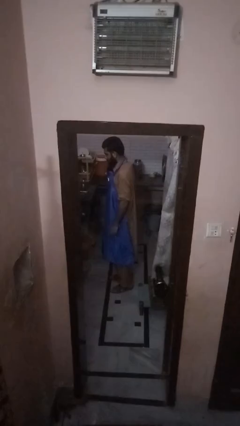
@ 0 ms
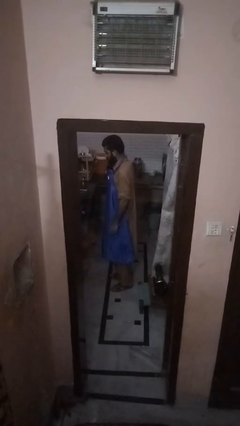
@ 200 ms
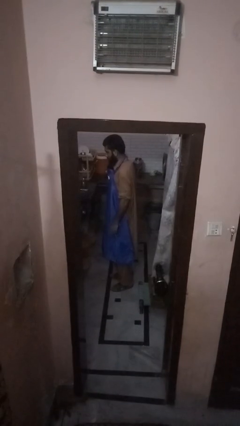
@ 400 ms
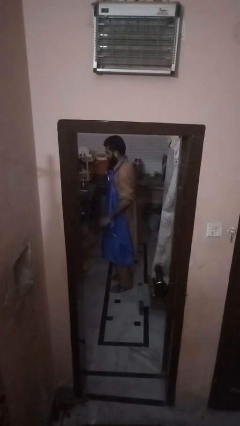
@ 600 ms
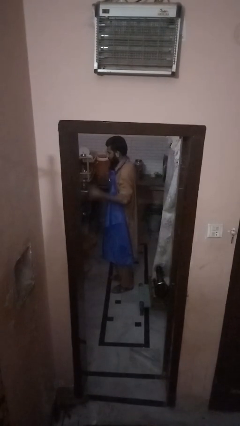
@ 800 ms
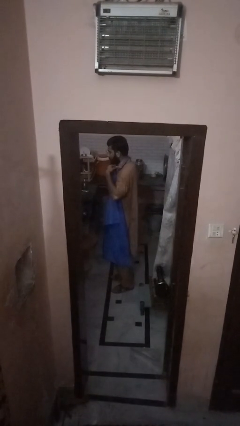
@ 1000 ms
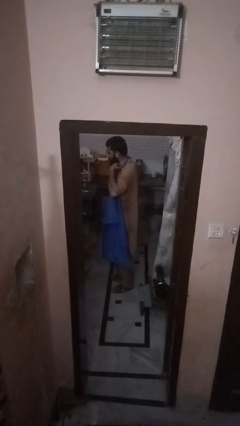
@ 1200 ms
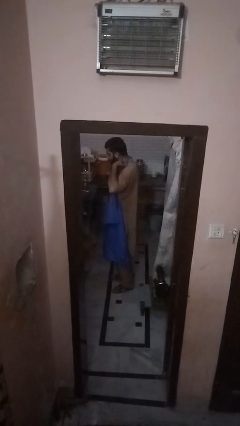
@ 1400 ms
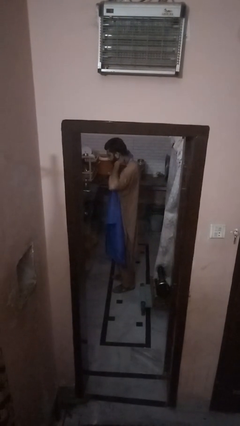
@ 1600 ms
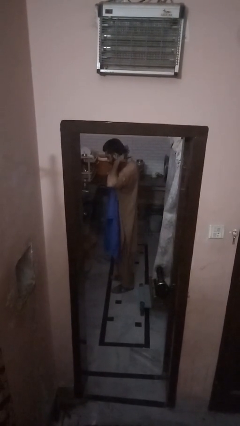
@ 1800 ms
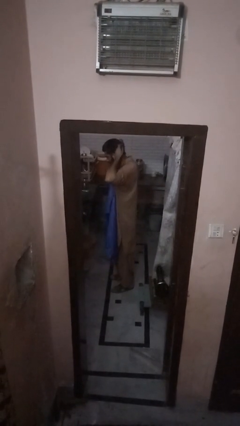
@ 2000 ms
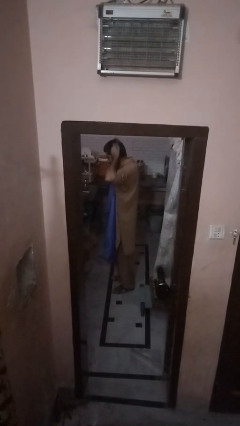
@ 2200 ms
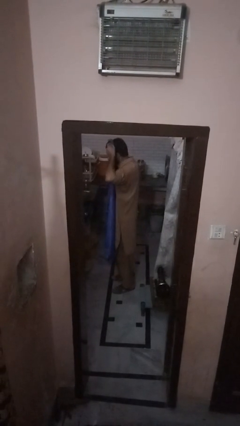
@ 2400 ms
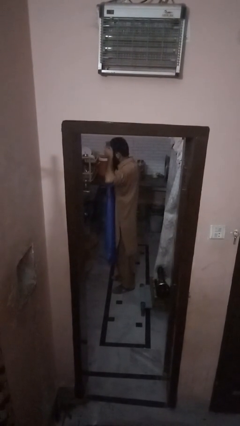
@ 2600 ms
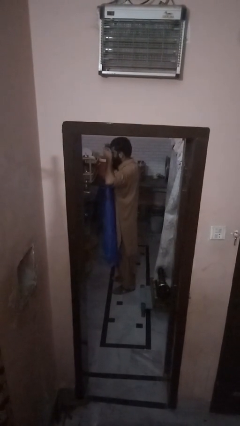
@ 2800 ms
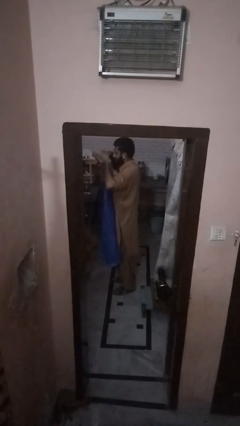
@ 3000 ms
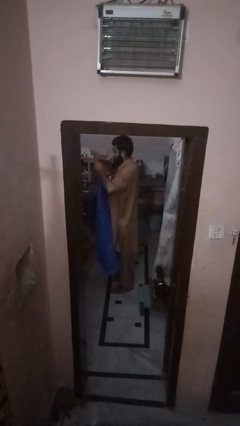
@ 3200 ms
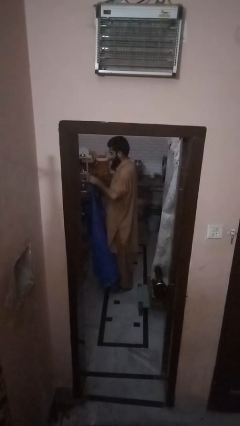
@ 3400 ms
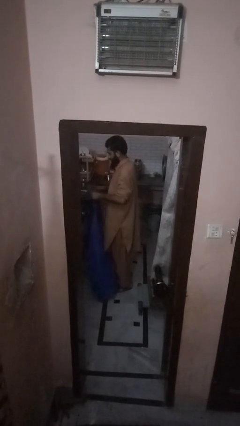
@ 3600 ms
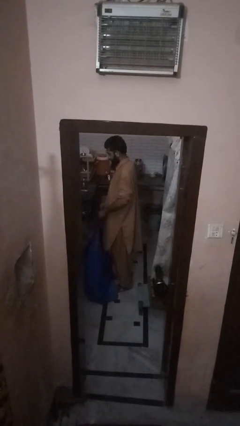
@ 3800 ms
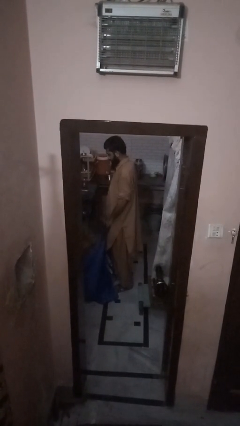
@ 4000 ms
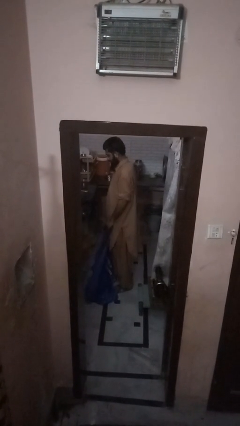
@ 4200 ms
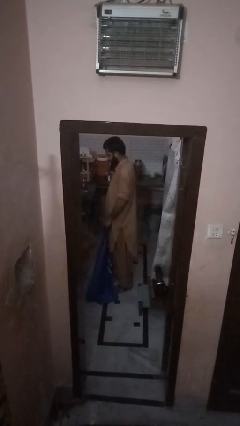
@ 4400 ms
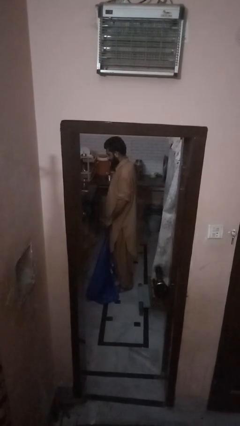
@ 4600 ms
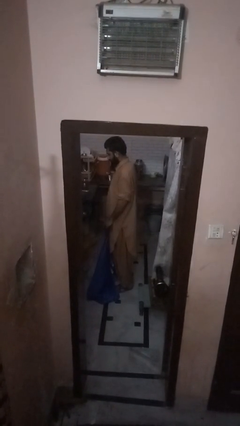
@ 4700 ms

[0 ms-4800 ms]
person takes off apron

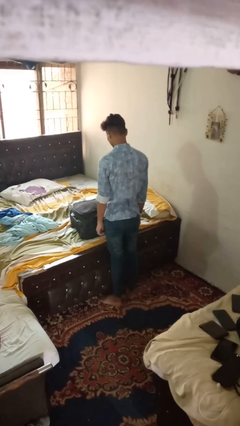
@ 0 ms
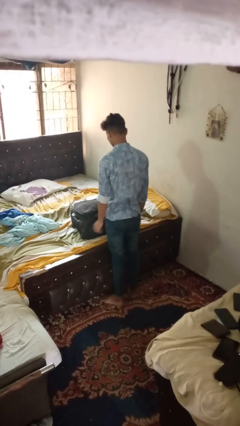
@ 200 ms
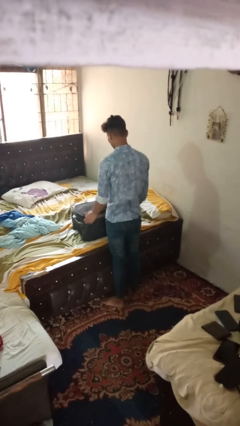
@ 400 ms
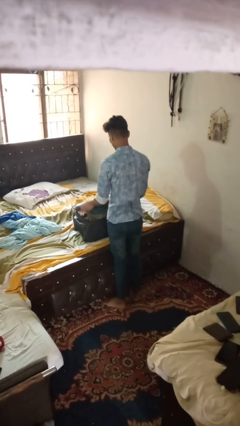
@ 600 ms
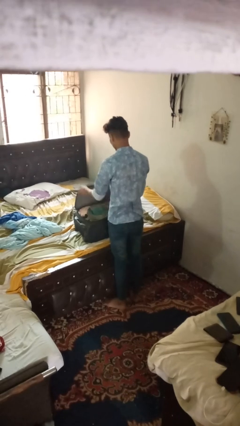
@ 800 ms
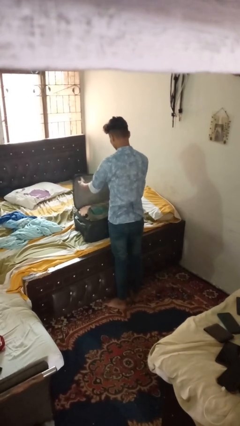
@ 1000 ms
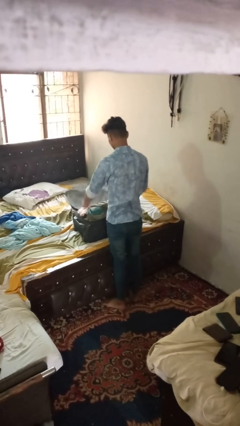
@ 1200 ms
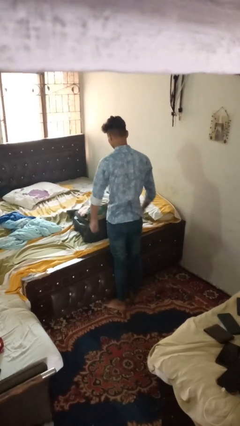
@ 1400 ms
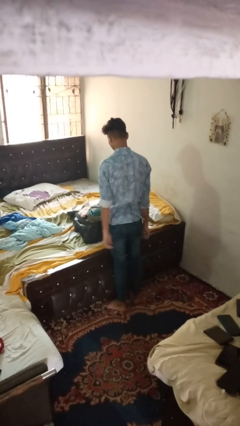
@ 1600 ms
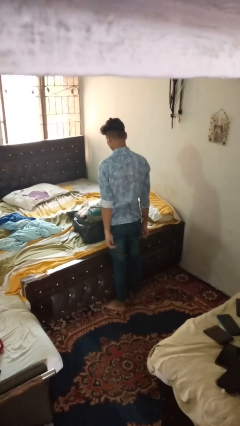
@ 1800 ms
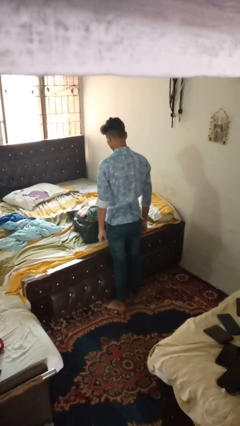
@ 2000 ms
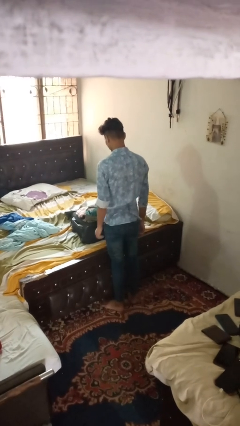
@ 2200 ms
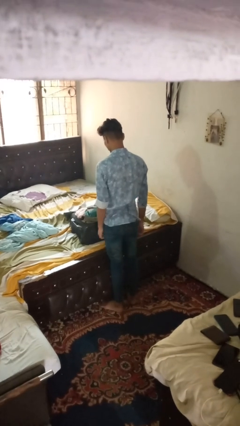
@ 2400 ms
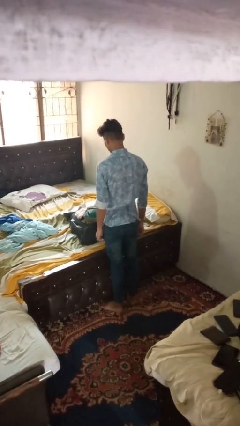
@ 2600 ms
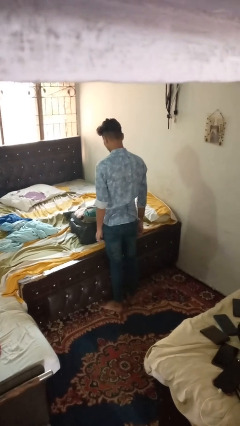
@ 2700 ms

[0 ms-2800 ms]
person opens suitcase

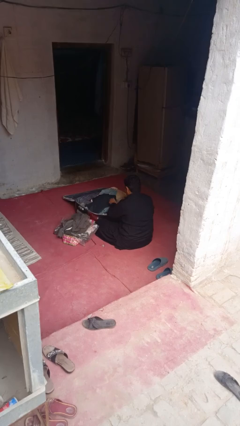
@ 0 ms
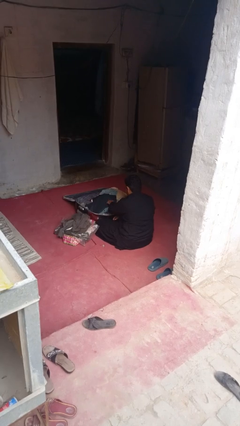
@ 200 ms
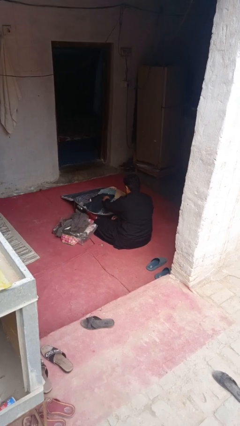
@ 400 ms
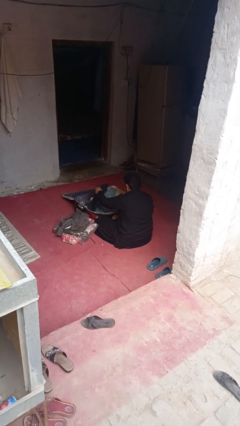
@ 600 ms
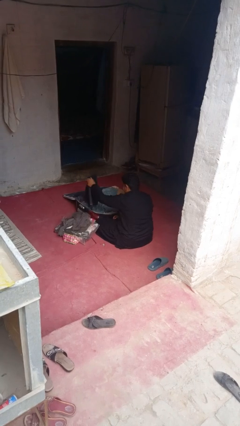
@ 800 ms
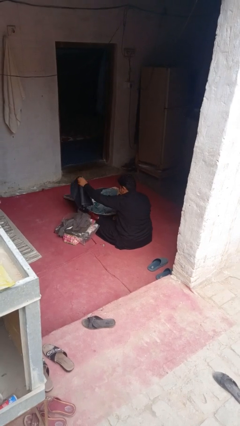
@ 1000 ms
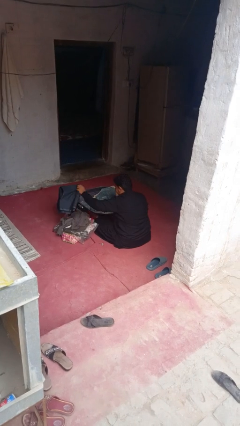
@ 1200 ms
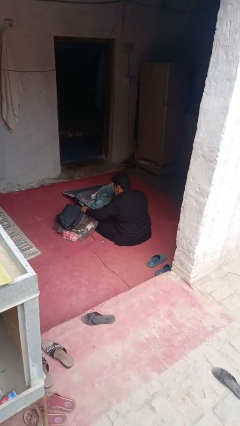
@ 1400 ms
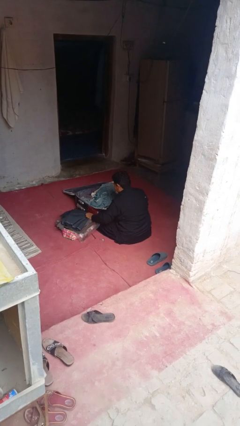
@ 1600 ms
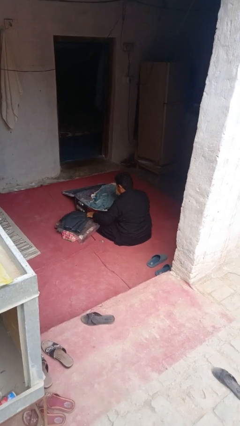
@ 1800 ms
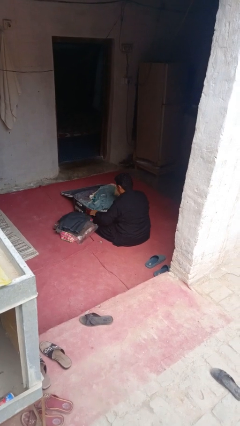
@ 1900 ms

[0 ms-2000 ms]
person unloads clothes from suitcase

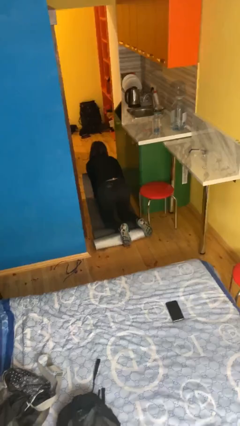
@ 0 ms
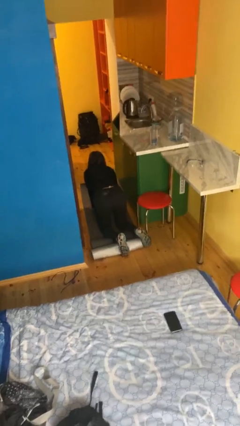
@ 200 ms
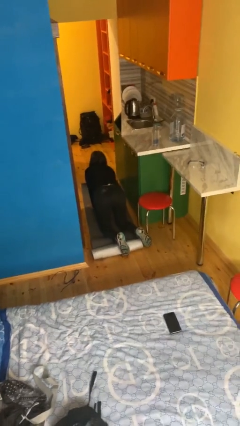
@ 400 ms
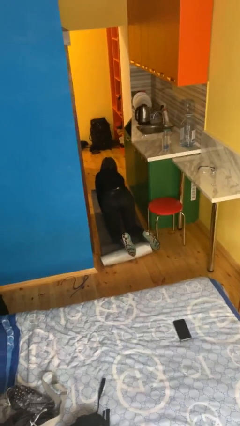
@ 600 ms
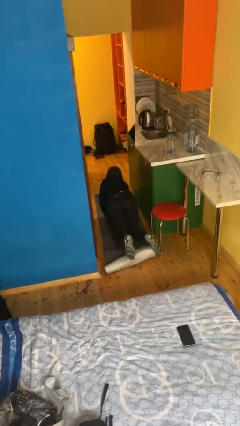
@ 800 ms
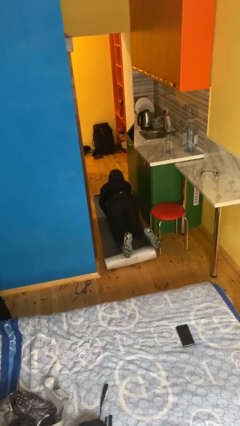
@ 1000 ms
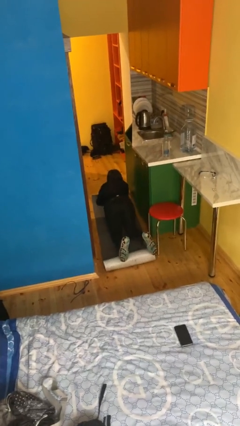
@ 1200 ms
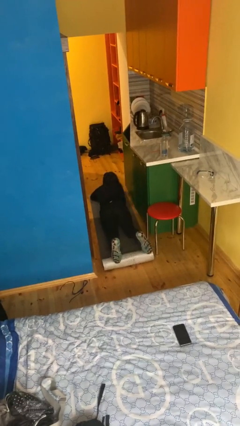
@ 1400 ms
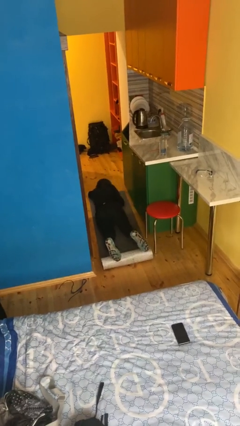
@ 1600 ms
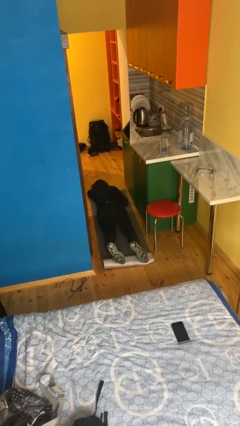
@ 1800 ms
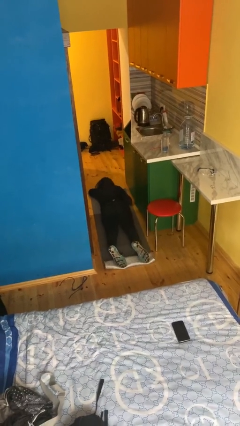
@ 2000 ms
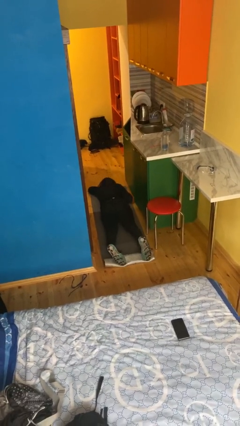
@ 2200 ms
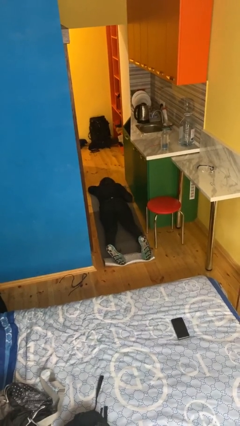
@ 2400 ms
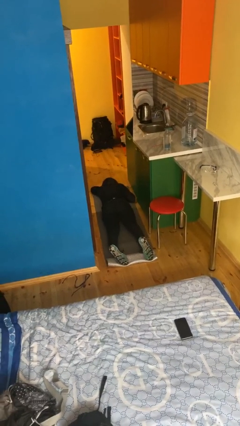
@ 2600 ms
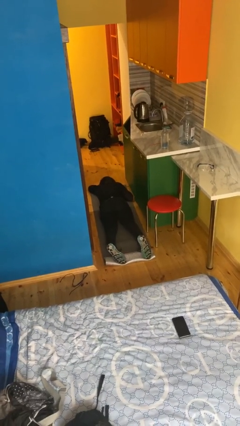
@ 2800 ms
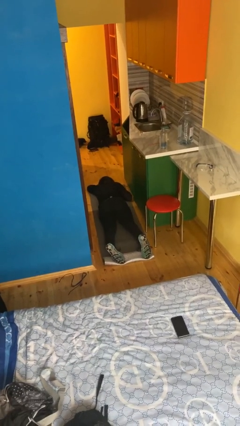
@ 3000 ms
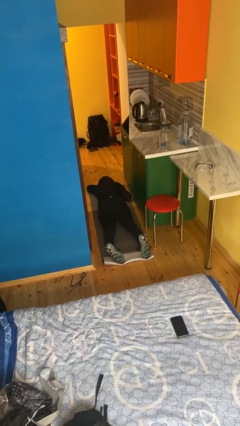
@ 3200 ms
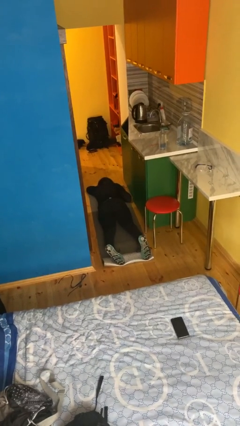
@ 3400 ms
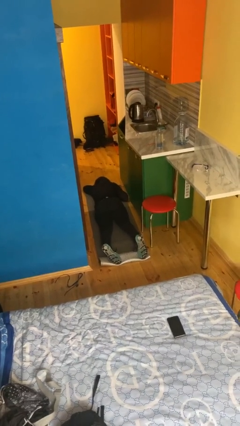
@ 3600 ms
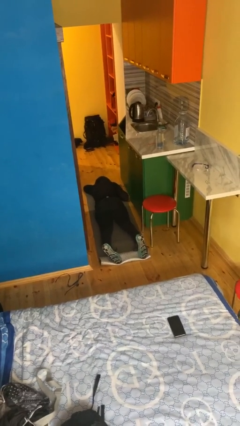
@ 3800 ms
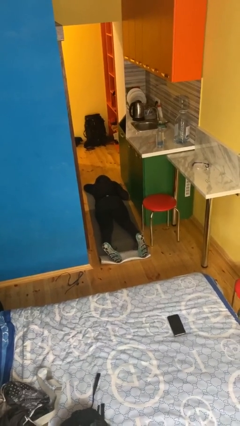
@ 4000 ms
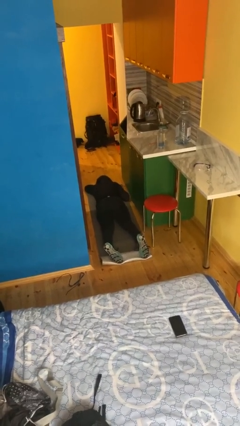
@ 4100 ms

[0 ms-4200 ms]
person lies down on floor

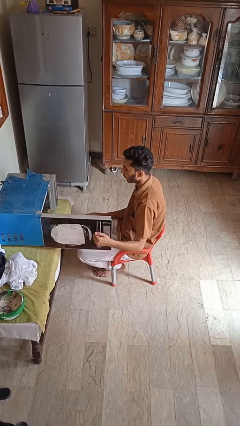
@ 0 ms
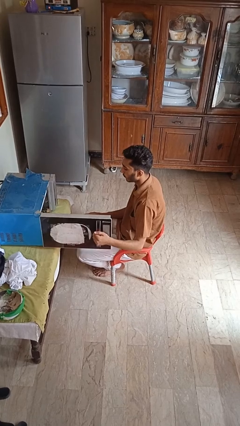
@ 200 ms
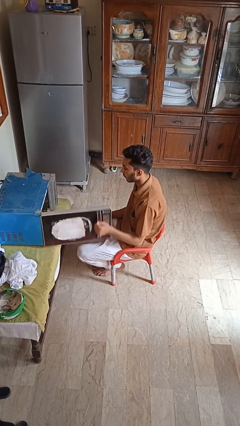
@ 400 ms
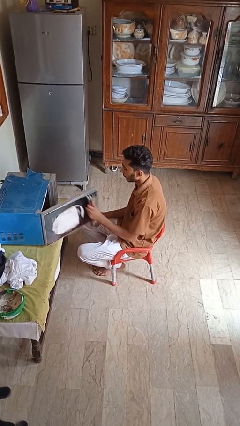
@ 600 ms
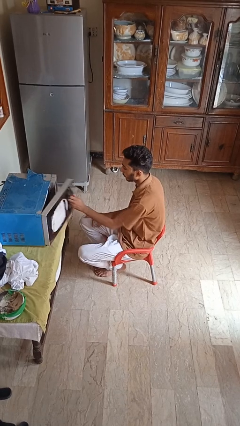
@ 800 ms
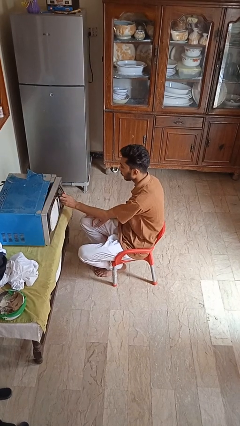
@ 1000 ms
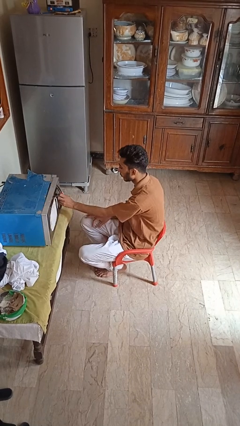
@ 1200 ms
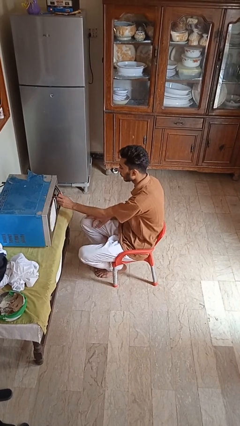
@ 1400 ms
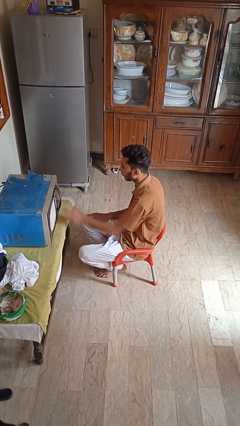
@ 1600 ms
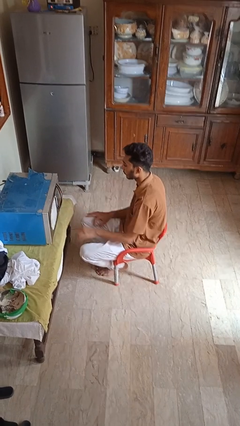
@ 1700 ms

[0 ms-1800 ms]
person closes microwave

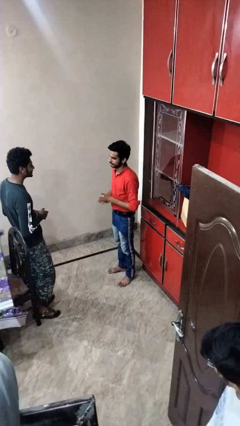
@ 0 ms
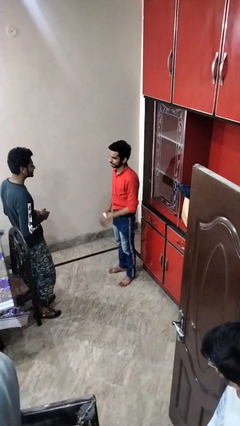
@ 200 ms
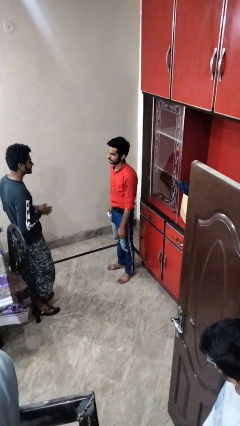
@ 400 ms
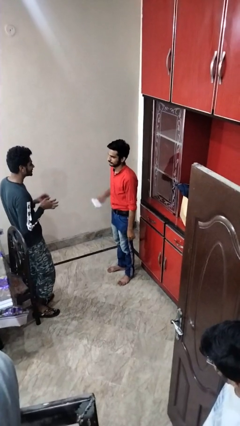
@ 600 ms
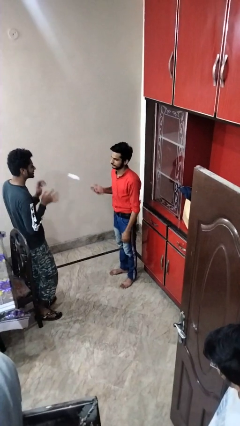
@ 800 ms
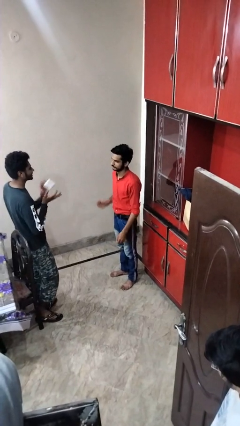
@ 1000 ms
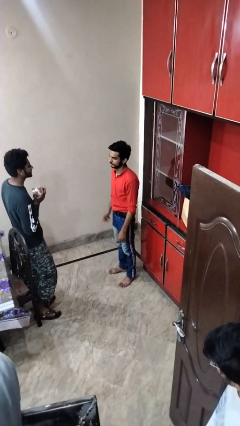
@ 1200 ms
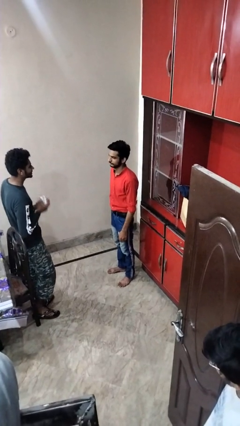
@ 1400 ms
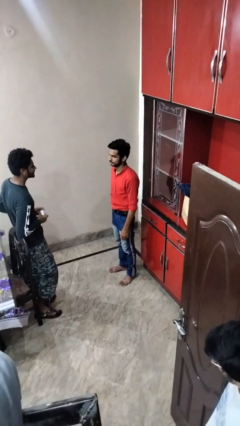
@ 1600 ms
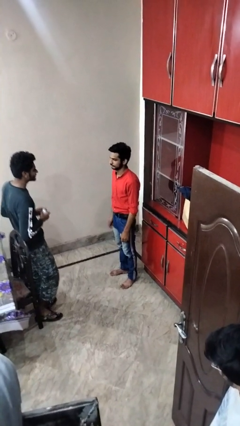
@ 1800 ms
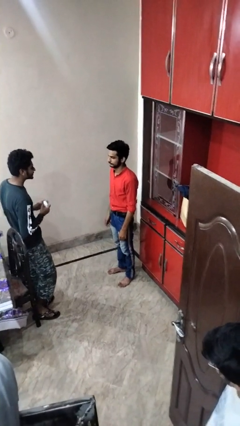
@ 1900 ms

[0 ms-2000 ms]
person throws object to person
